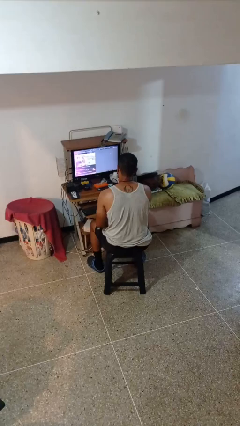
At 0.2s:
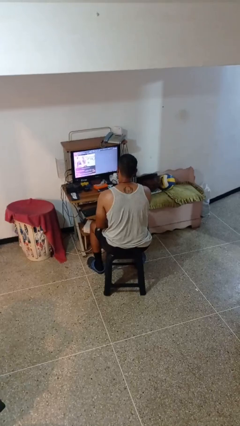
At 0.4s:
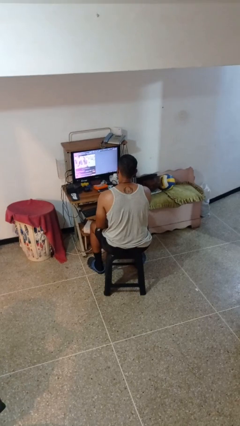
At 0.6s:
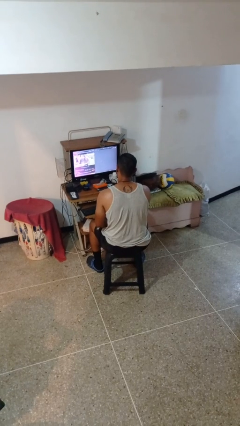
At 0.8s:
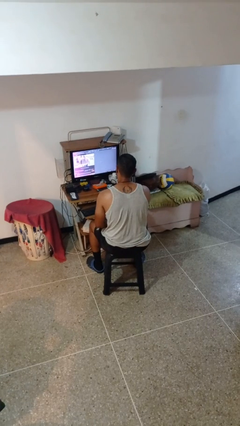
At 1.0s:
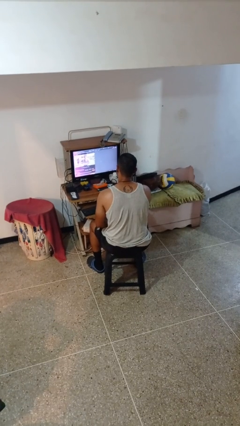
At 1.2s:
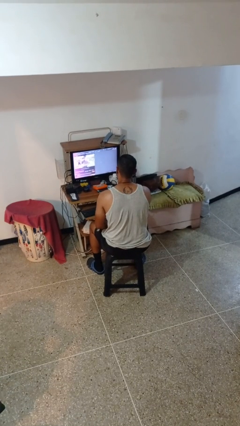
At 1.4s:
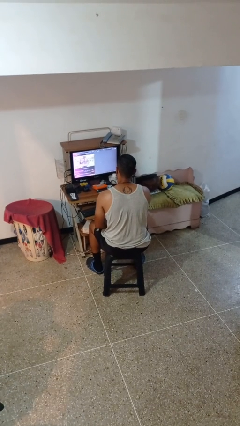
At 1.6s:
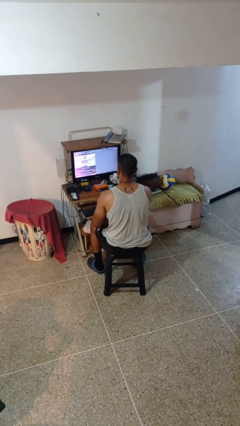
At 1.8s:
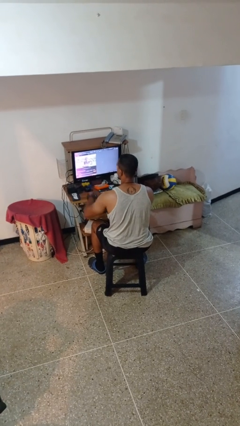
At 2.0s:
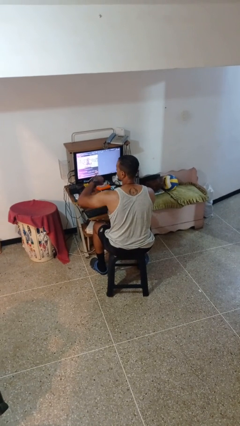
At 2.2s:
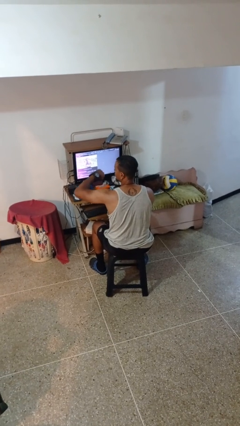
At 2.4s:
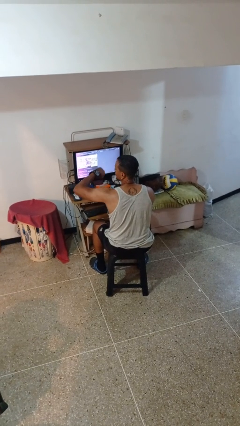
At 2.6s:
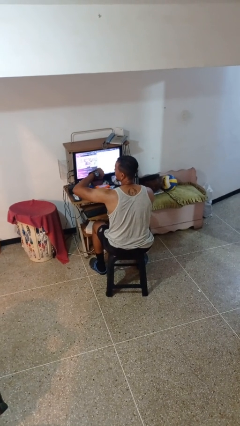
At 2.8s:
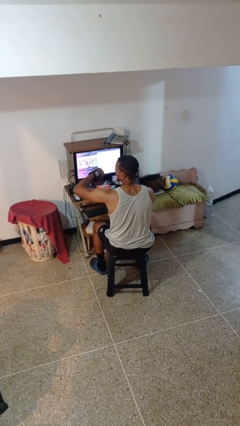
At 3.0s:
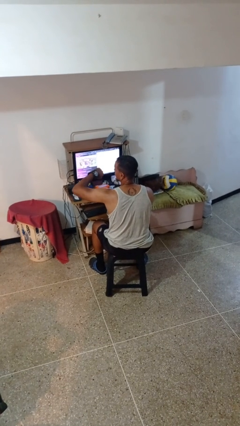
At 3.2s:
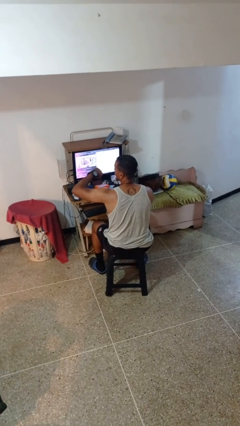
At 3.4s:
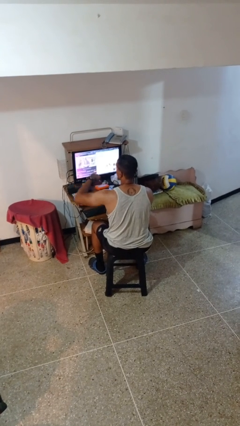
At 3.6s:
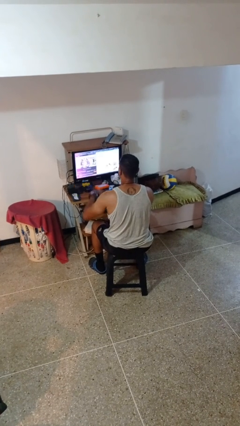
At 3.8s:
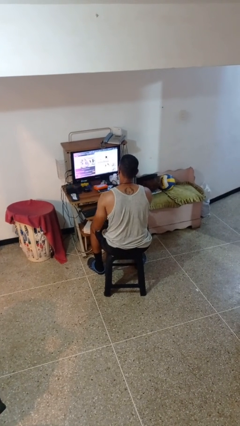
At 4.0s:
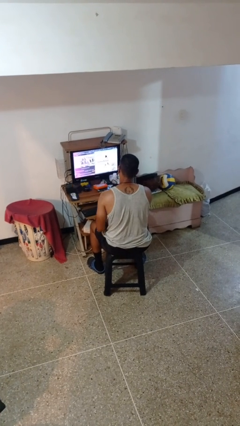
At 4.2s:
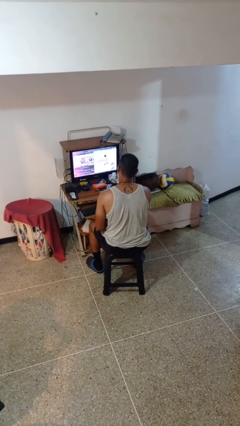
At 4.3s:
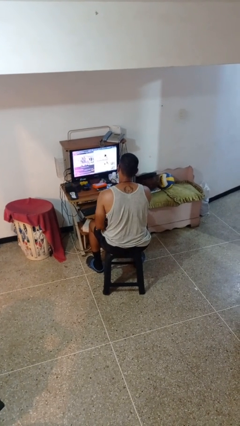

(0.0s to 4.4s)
person looks at wristwatch

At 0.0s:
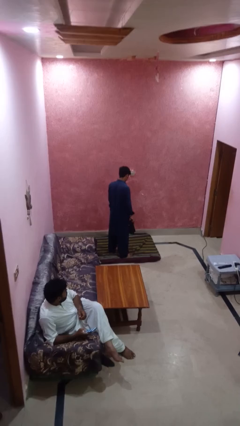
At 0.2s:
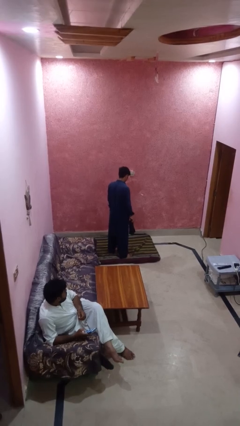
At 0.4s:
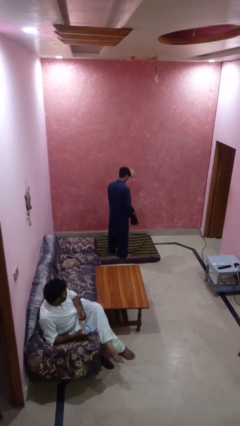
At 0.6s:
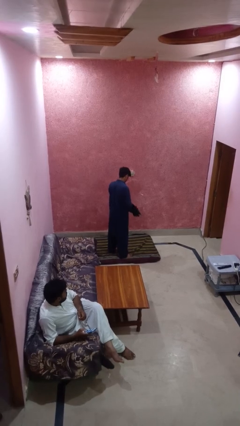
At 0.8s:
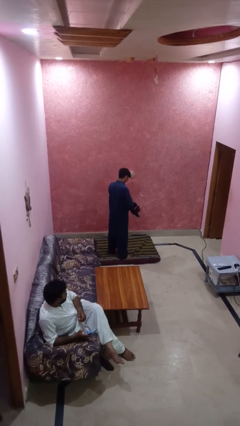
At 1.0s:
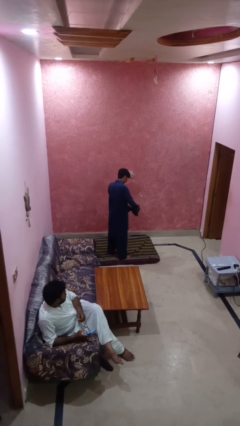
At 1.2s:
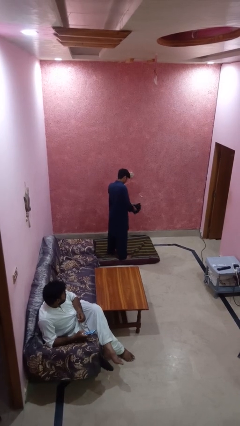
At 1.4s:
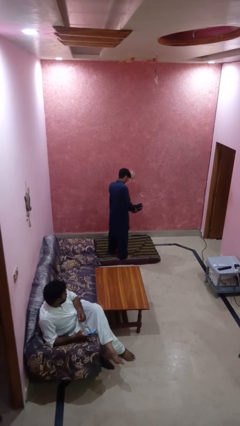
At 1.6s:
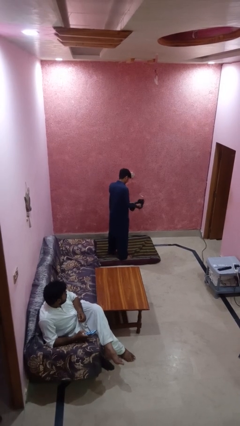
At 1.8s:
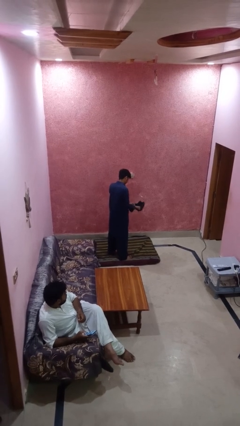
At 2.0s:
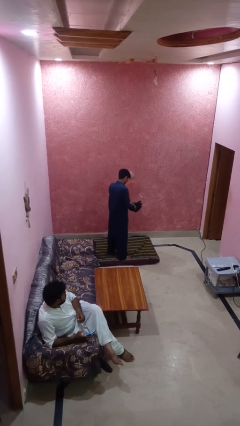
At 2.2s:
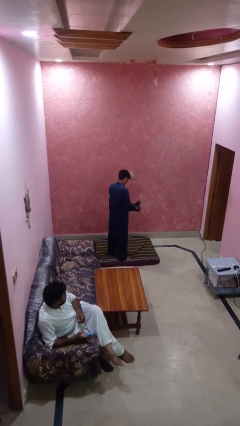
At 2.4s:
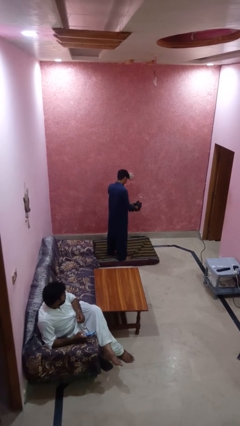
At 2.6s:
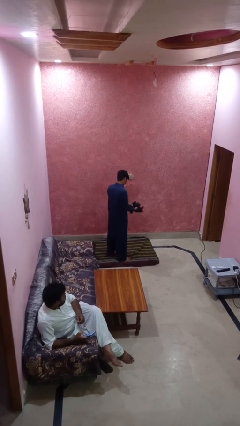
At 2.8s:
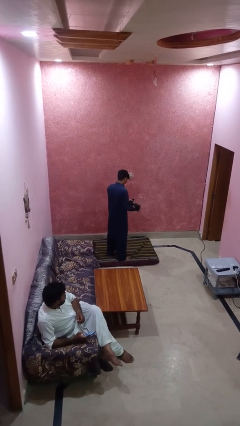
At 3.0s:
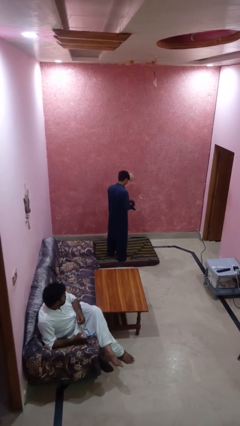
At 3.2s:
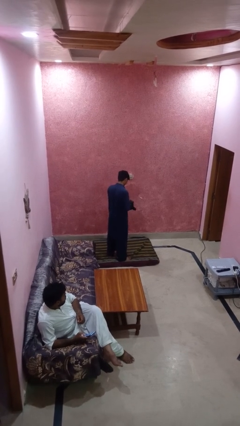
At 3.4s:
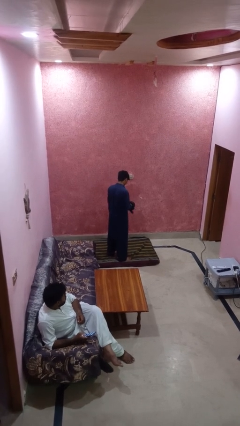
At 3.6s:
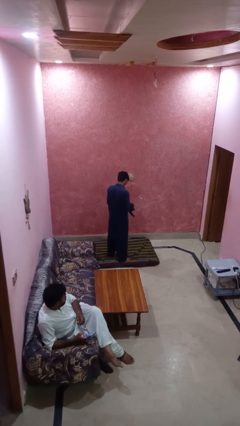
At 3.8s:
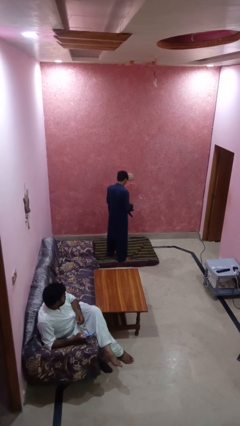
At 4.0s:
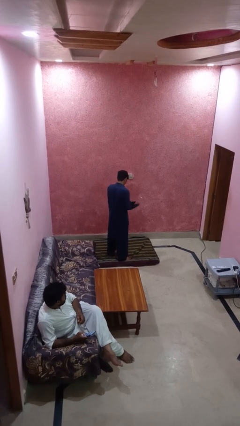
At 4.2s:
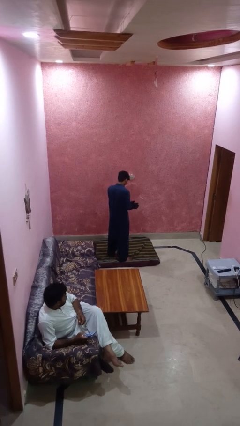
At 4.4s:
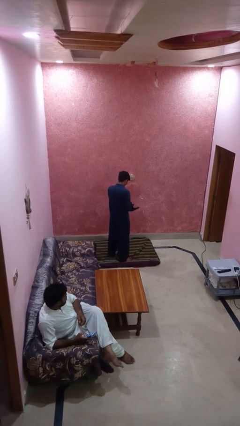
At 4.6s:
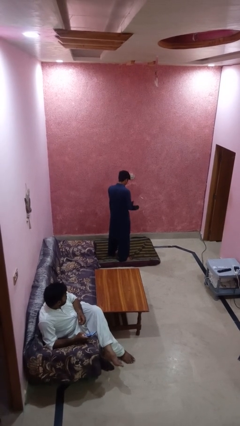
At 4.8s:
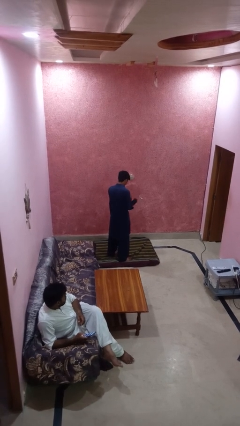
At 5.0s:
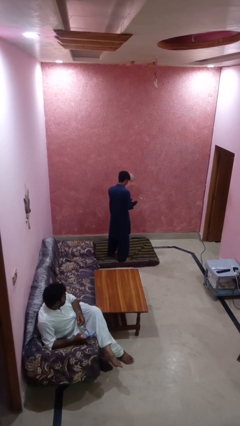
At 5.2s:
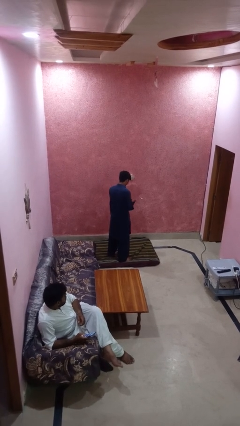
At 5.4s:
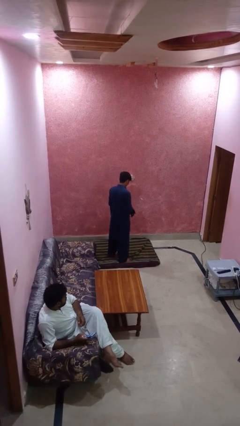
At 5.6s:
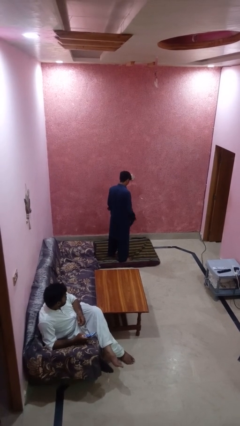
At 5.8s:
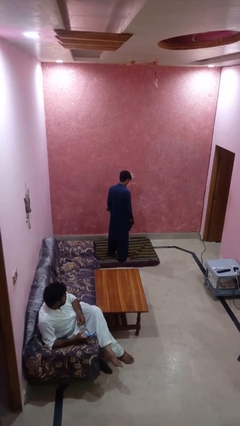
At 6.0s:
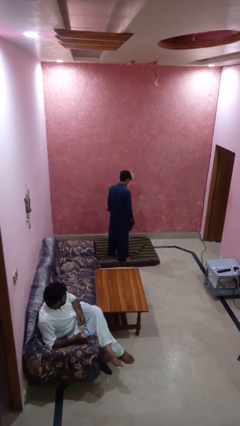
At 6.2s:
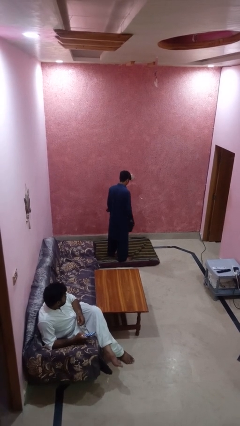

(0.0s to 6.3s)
person puts on gloves

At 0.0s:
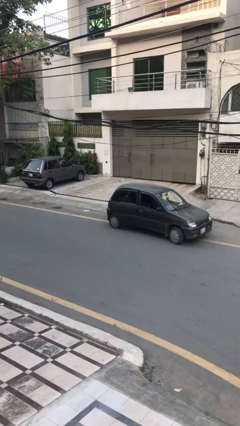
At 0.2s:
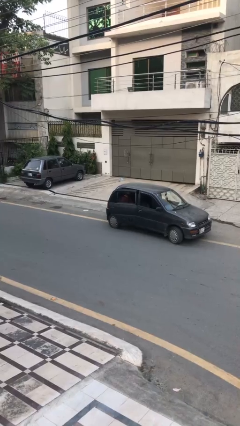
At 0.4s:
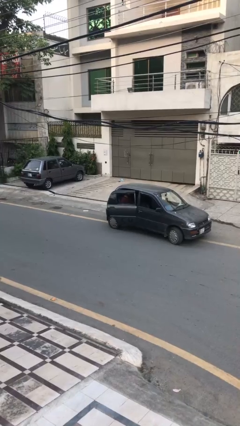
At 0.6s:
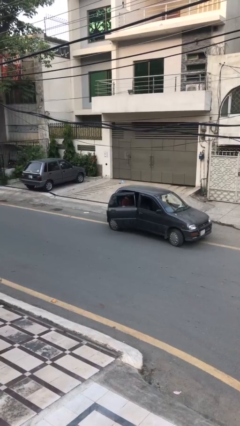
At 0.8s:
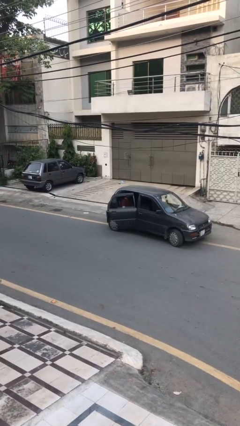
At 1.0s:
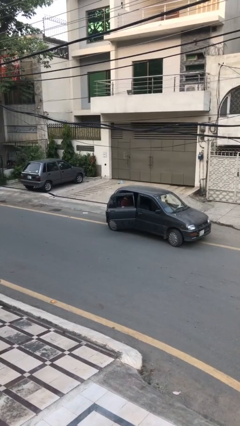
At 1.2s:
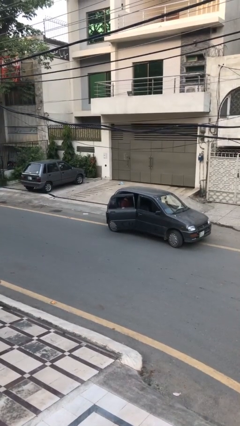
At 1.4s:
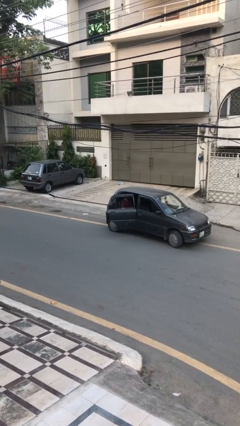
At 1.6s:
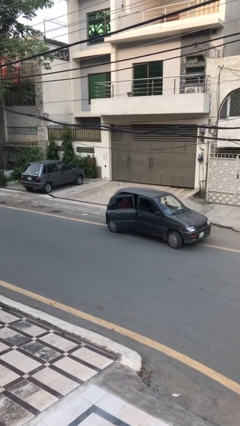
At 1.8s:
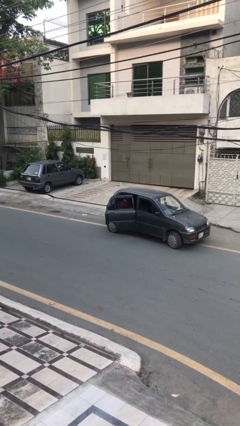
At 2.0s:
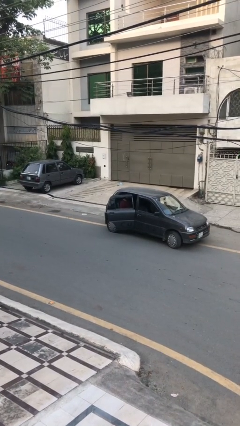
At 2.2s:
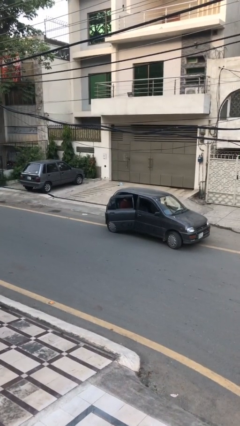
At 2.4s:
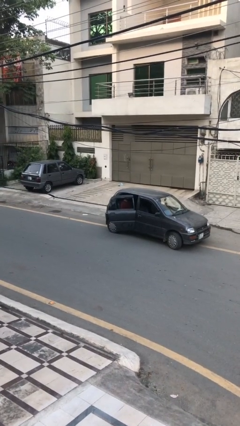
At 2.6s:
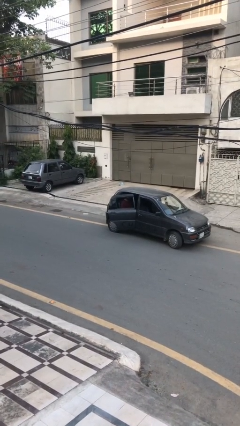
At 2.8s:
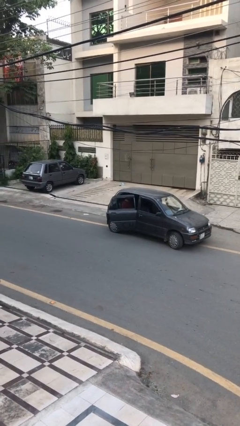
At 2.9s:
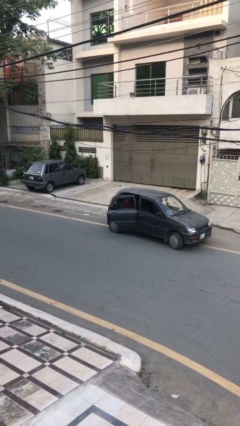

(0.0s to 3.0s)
person opens car door

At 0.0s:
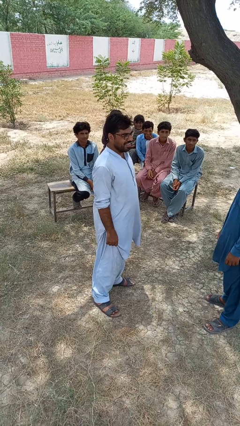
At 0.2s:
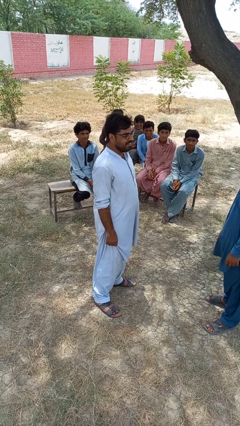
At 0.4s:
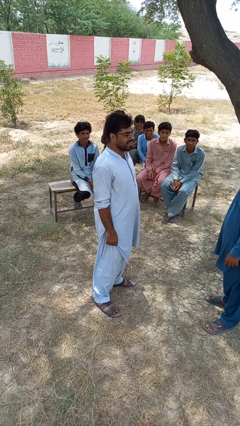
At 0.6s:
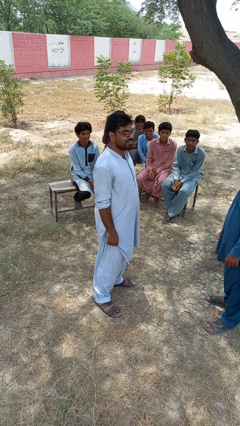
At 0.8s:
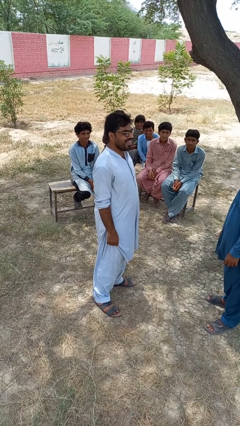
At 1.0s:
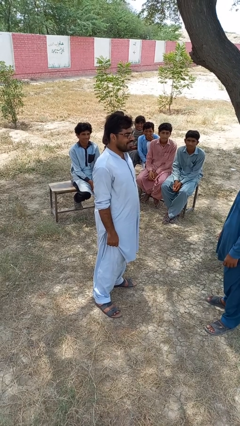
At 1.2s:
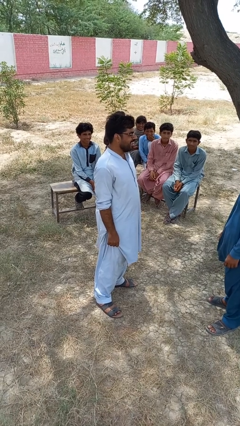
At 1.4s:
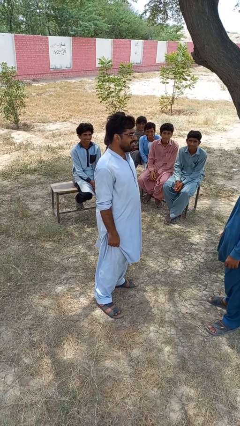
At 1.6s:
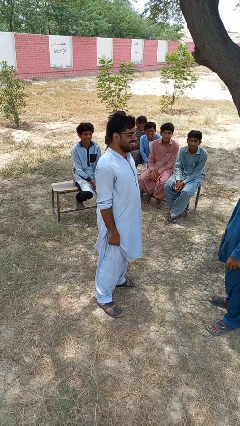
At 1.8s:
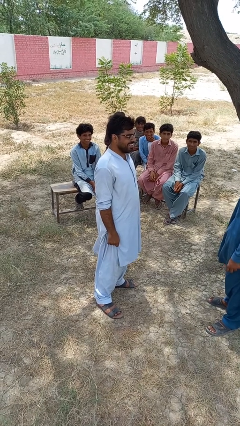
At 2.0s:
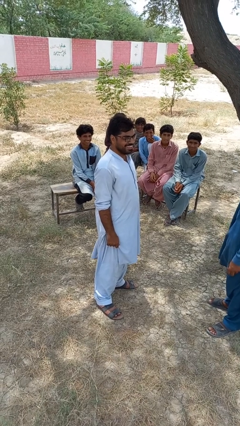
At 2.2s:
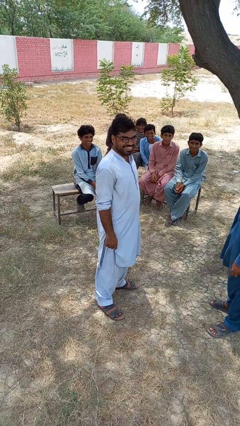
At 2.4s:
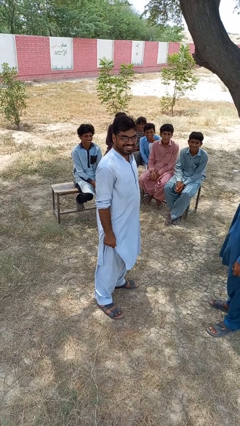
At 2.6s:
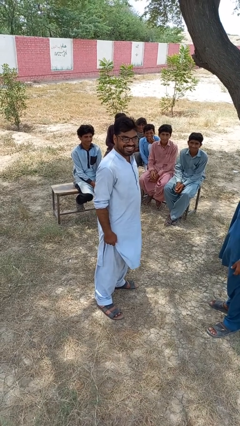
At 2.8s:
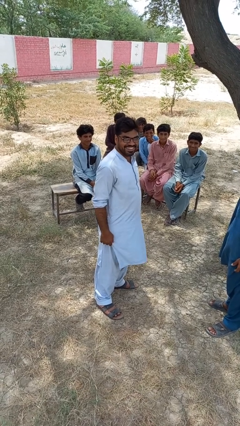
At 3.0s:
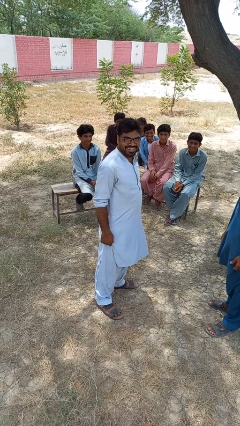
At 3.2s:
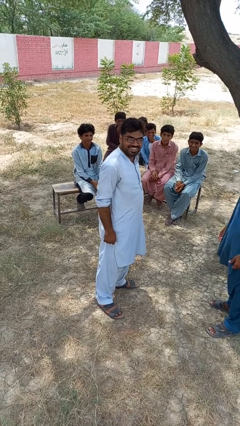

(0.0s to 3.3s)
person laughs with person

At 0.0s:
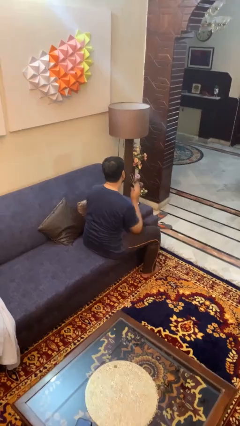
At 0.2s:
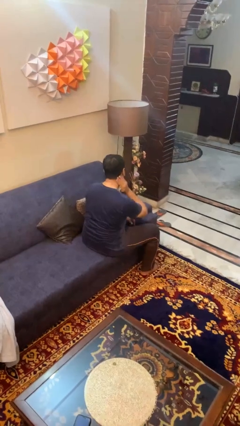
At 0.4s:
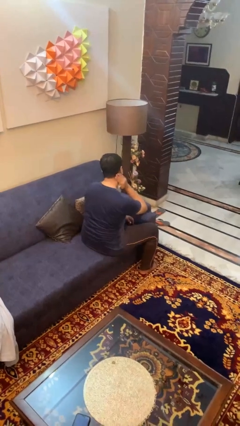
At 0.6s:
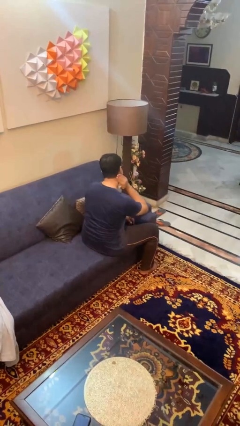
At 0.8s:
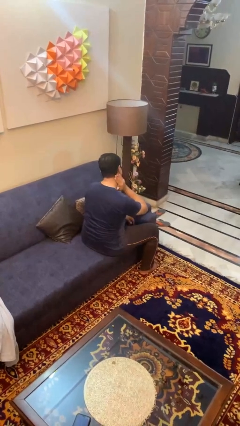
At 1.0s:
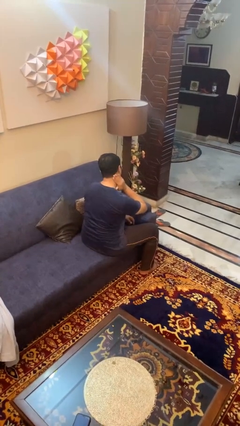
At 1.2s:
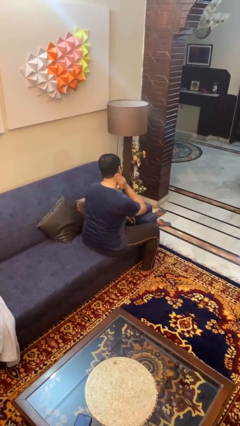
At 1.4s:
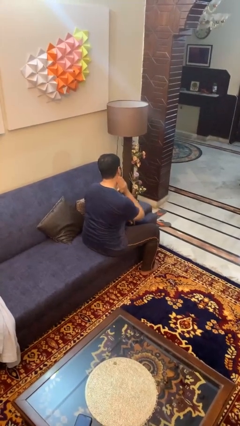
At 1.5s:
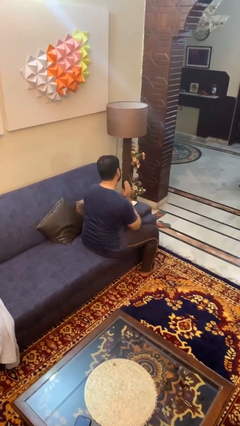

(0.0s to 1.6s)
person rubs neck
